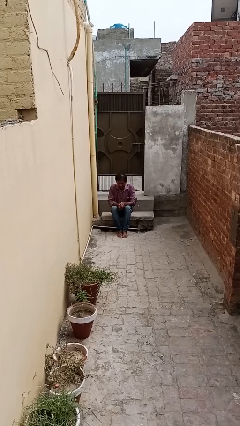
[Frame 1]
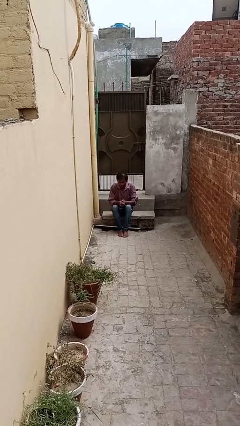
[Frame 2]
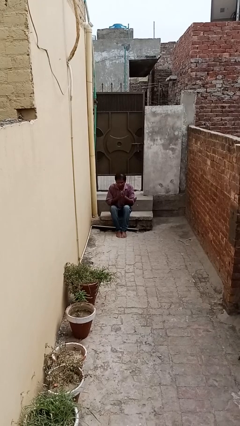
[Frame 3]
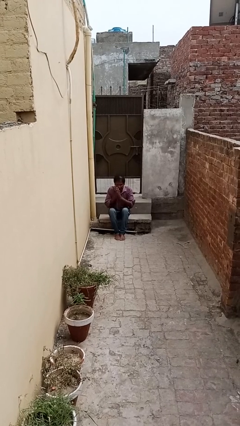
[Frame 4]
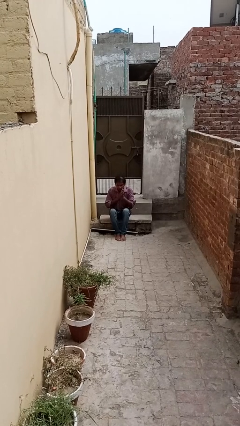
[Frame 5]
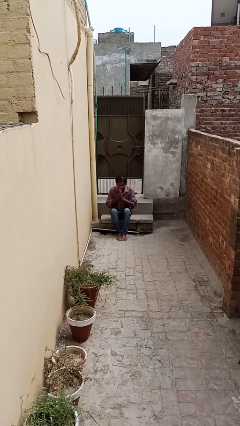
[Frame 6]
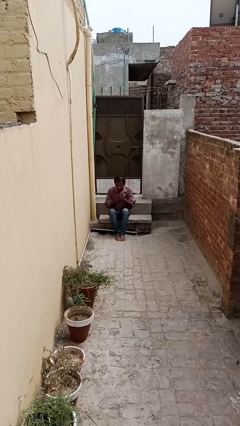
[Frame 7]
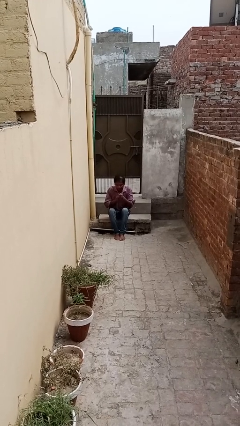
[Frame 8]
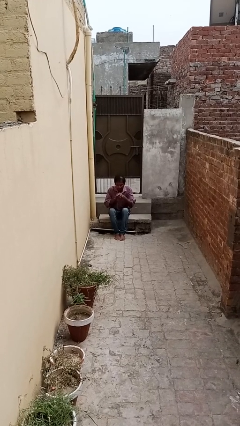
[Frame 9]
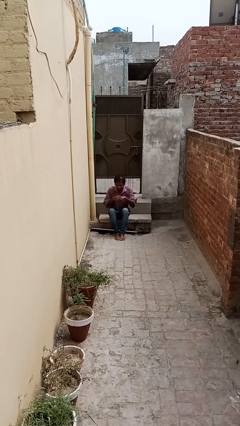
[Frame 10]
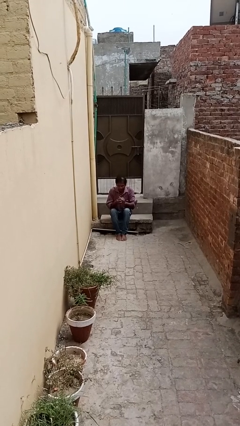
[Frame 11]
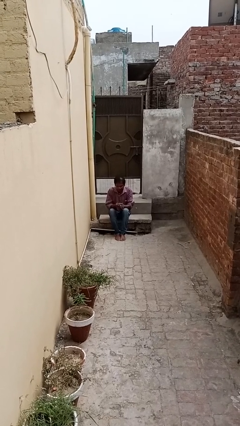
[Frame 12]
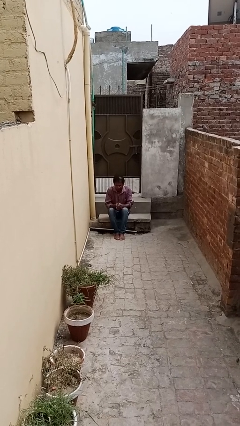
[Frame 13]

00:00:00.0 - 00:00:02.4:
person blows into hands

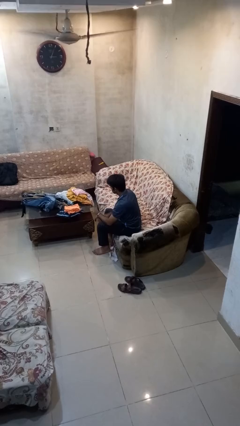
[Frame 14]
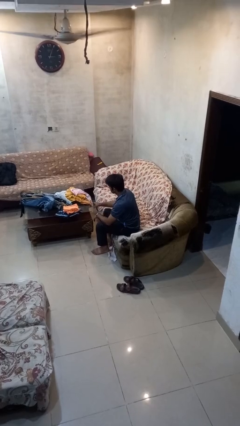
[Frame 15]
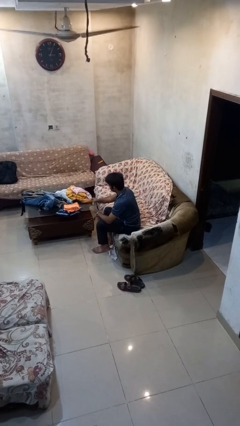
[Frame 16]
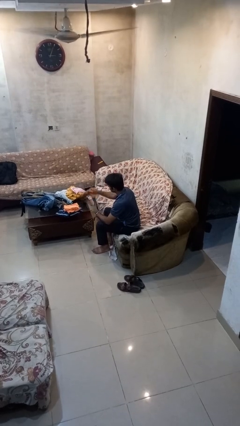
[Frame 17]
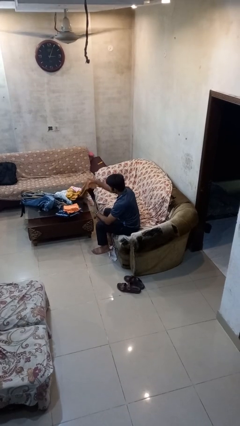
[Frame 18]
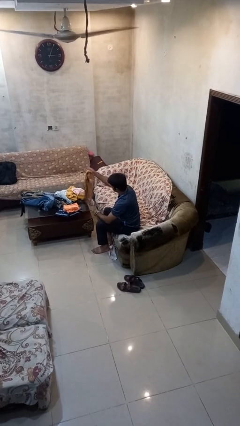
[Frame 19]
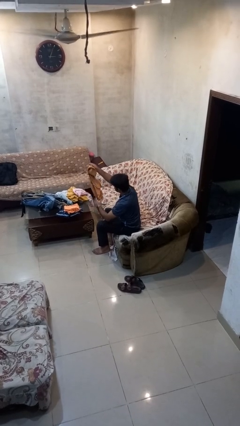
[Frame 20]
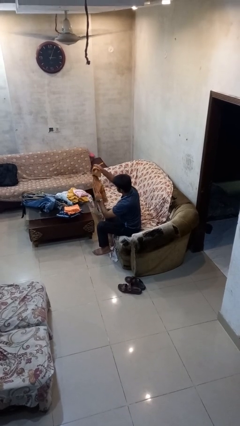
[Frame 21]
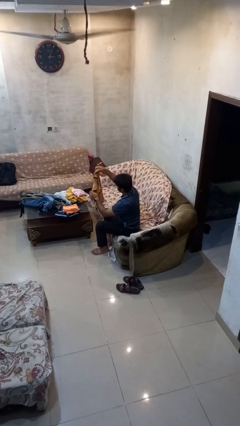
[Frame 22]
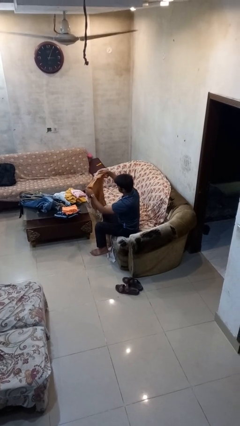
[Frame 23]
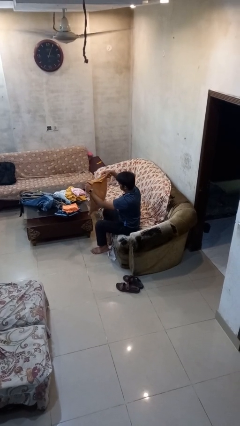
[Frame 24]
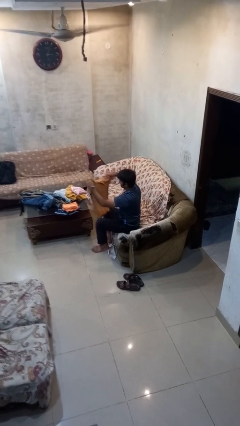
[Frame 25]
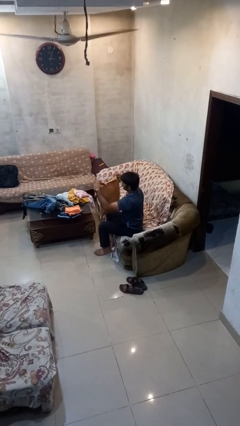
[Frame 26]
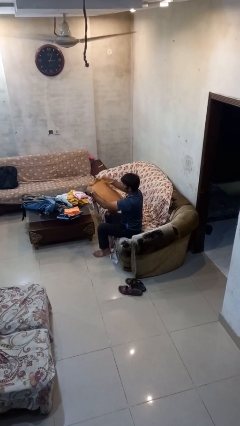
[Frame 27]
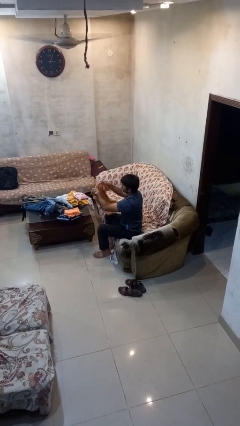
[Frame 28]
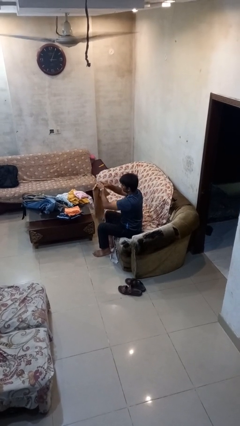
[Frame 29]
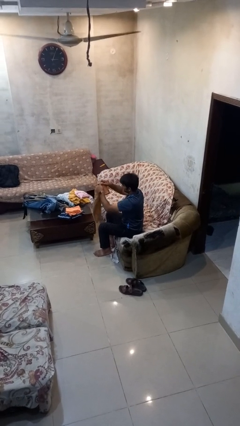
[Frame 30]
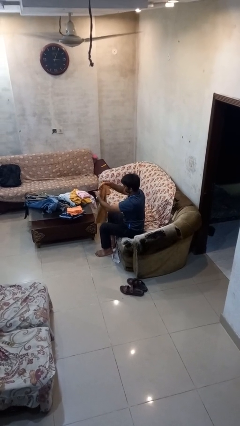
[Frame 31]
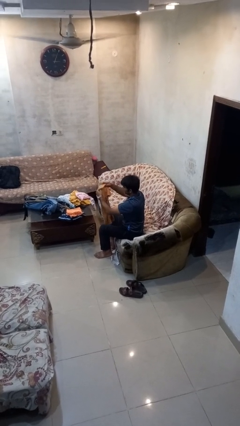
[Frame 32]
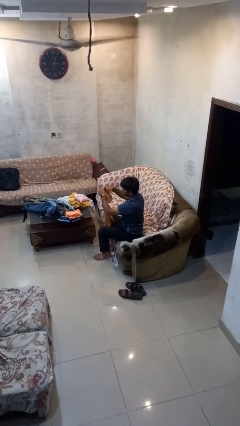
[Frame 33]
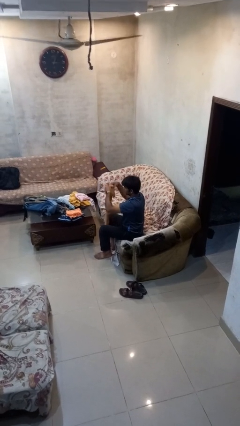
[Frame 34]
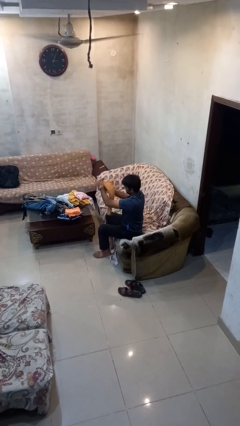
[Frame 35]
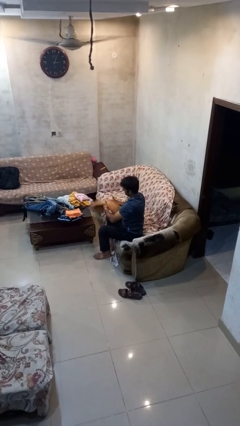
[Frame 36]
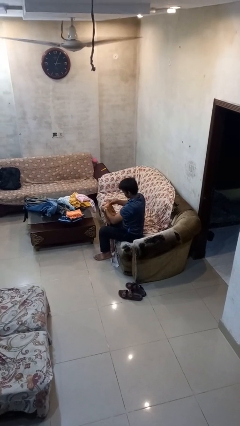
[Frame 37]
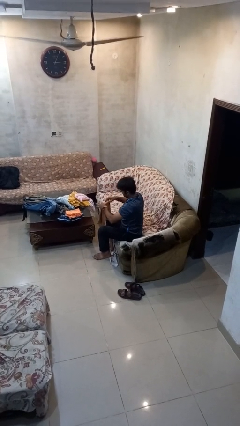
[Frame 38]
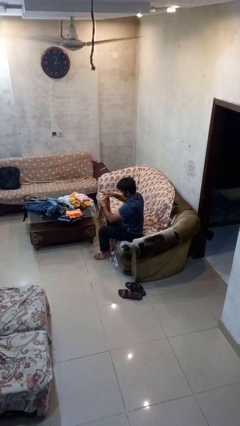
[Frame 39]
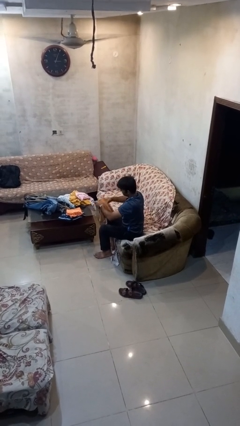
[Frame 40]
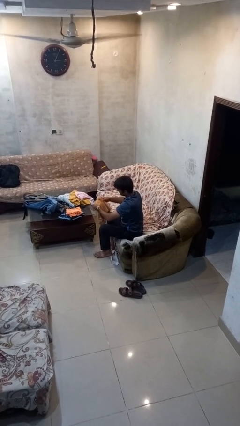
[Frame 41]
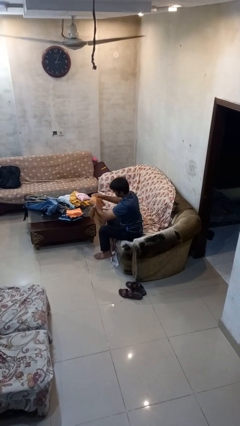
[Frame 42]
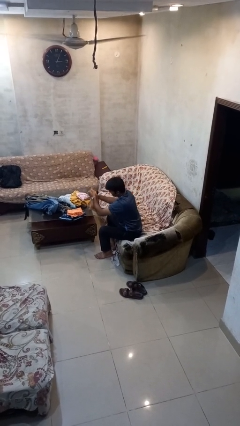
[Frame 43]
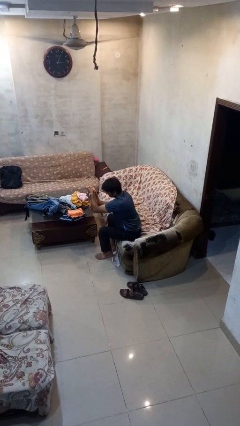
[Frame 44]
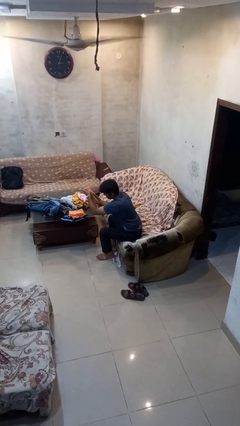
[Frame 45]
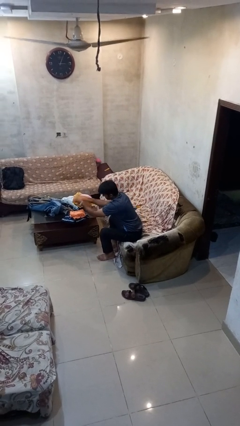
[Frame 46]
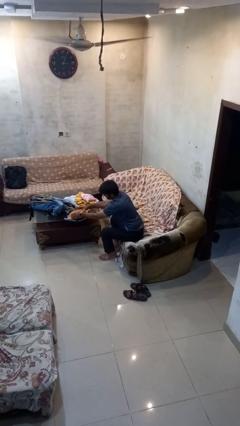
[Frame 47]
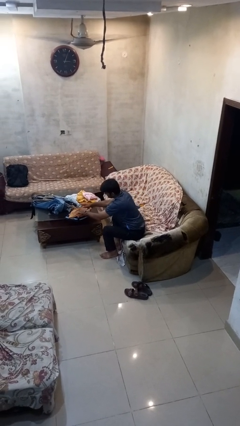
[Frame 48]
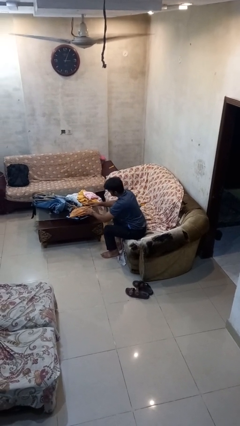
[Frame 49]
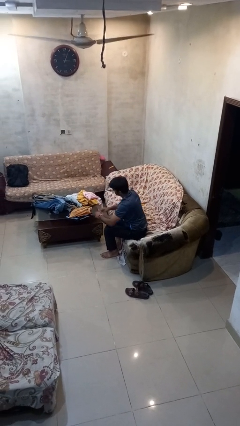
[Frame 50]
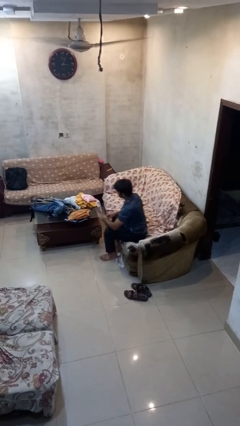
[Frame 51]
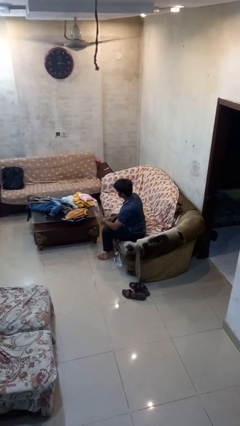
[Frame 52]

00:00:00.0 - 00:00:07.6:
person folds shirt

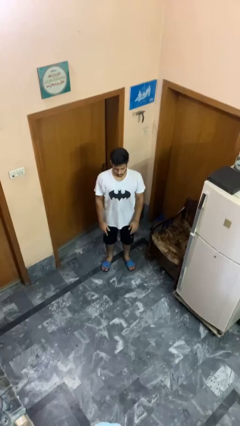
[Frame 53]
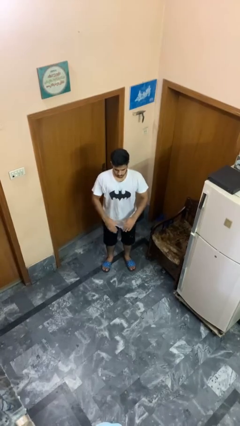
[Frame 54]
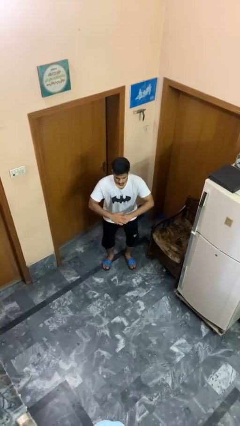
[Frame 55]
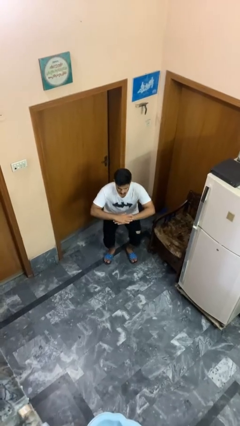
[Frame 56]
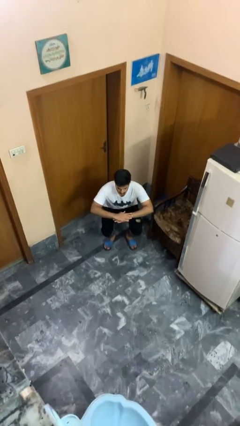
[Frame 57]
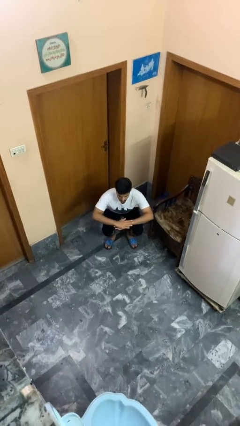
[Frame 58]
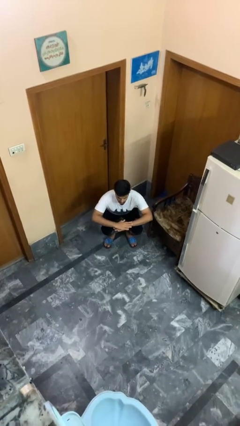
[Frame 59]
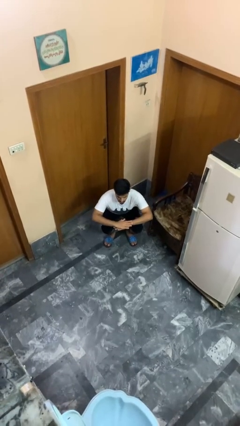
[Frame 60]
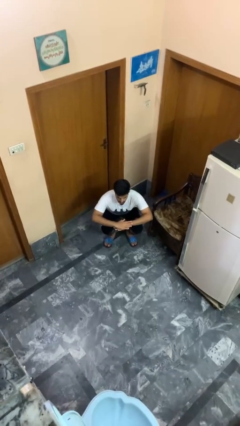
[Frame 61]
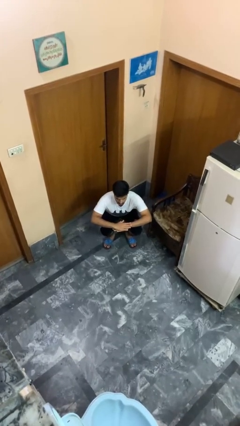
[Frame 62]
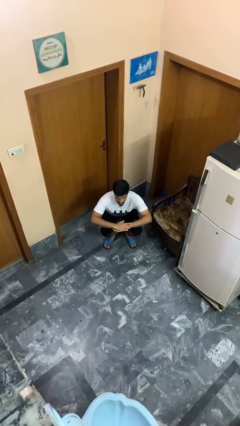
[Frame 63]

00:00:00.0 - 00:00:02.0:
person squats

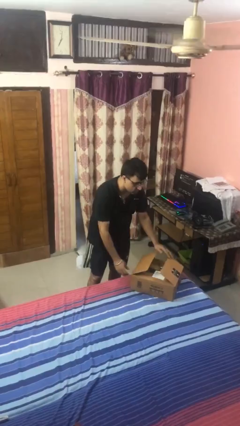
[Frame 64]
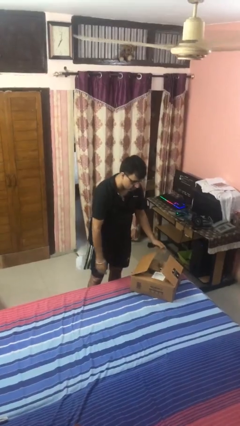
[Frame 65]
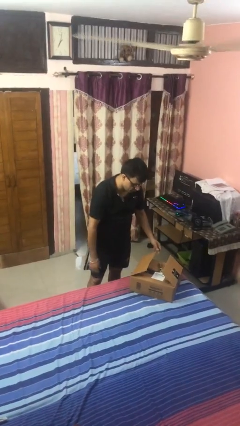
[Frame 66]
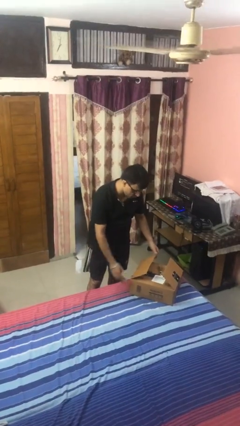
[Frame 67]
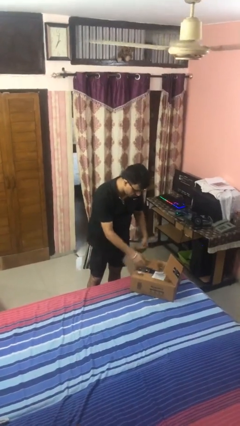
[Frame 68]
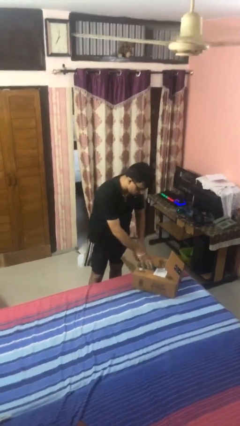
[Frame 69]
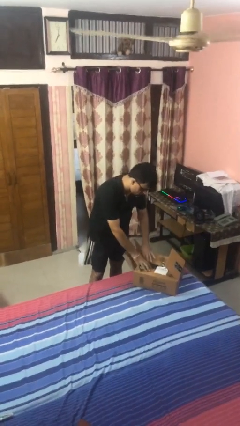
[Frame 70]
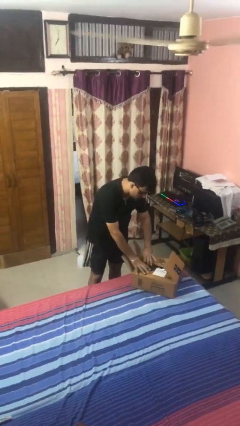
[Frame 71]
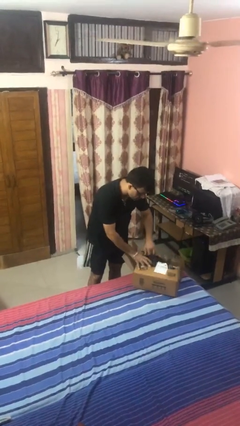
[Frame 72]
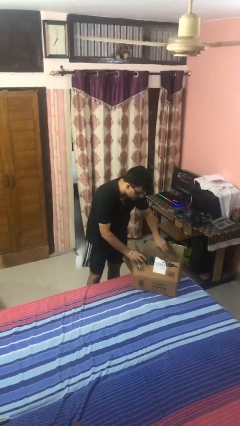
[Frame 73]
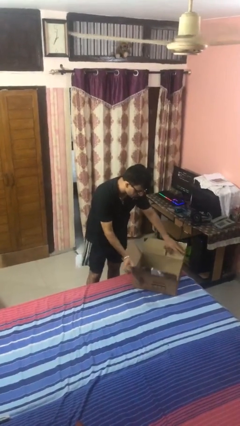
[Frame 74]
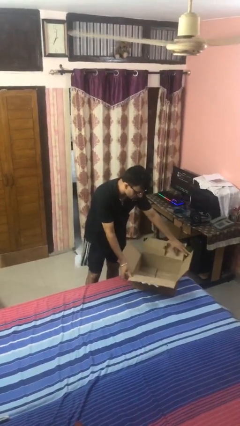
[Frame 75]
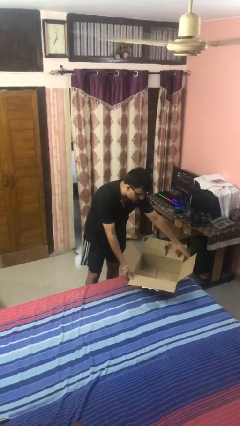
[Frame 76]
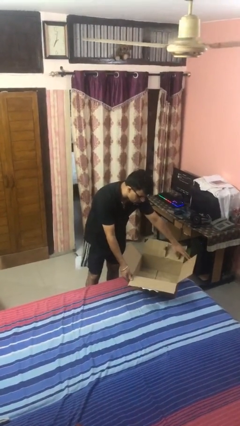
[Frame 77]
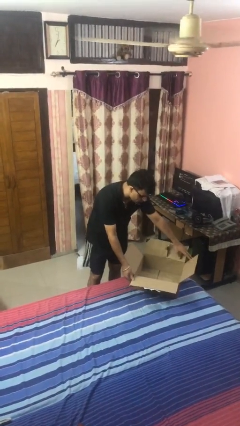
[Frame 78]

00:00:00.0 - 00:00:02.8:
person opens box

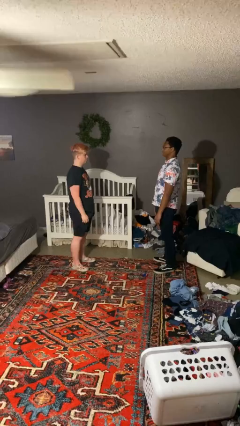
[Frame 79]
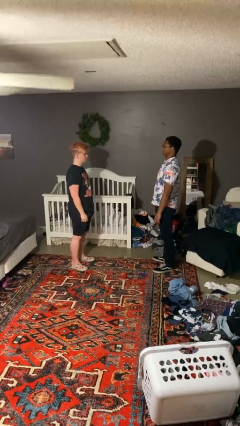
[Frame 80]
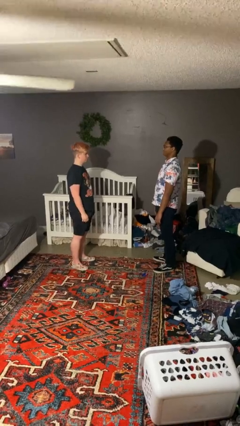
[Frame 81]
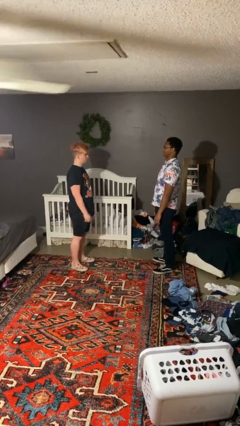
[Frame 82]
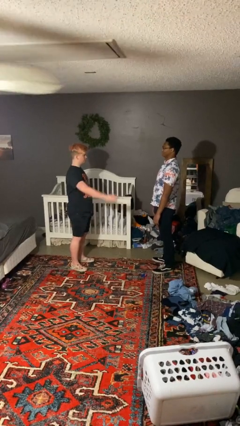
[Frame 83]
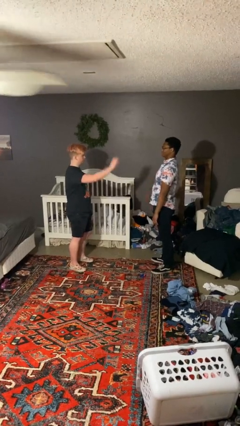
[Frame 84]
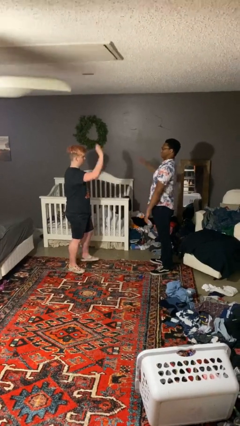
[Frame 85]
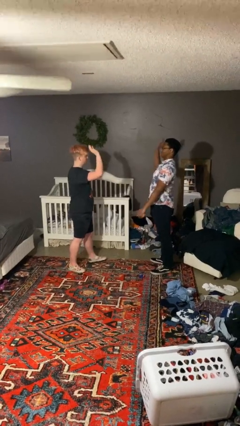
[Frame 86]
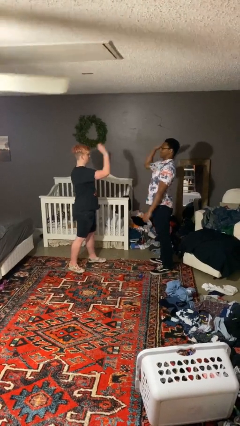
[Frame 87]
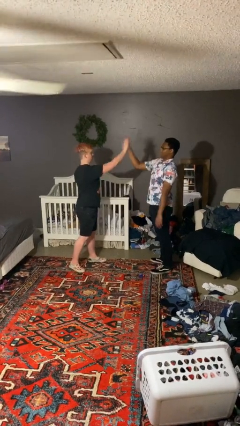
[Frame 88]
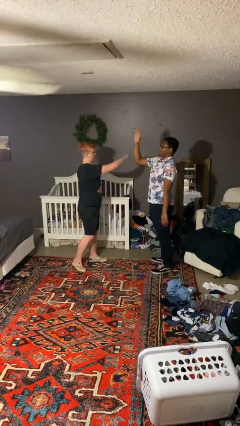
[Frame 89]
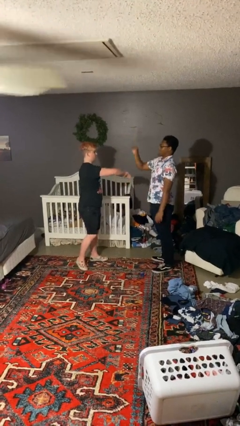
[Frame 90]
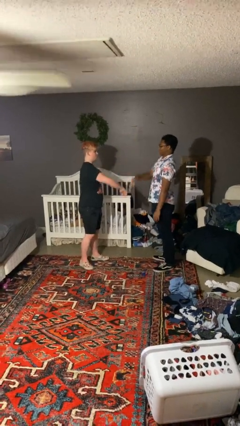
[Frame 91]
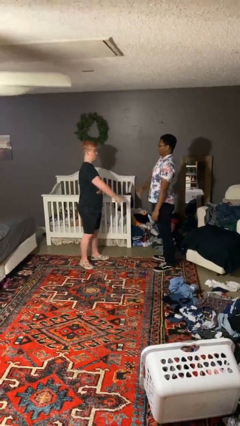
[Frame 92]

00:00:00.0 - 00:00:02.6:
person highfives hand

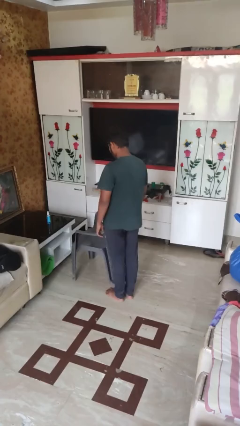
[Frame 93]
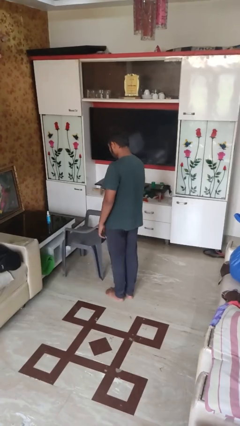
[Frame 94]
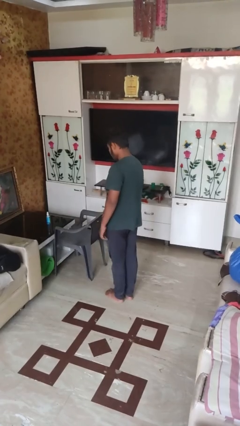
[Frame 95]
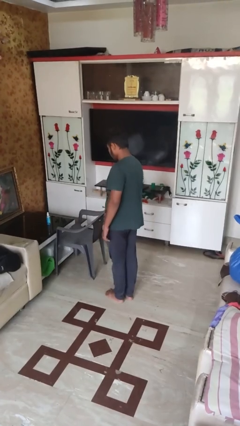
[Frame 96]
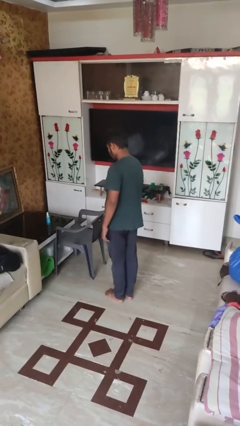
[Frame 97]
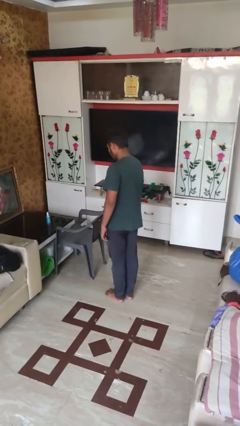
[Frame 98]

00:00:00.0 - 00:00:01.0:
person pushes in chair
